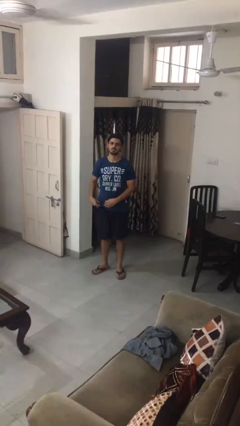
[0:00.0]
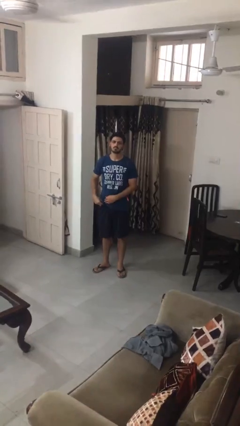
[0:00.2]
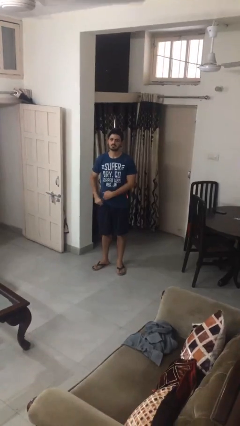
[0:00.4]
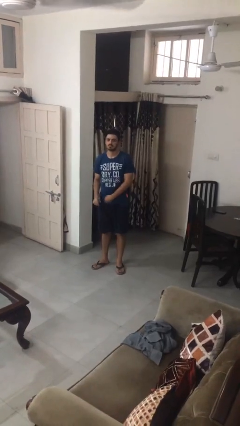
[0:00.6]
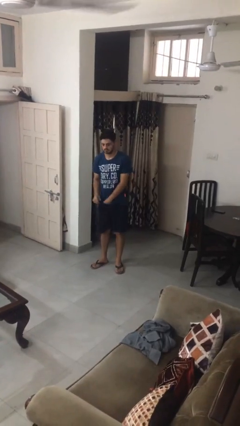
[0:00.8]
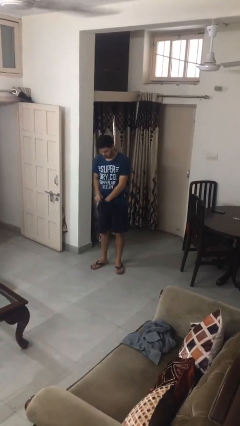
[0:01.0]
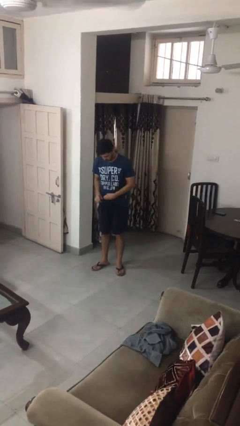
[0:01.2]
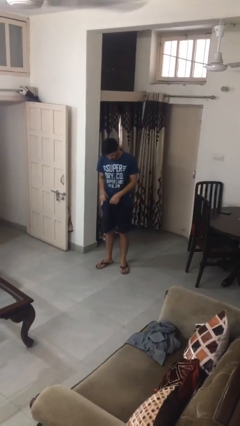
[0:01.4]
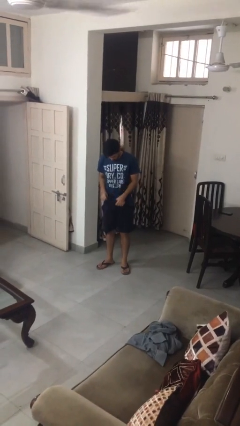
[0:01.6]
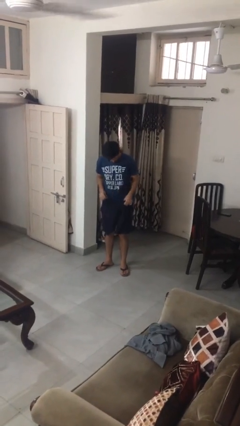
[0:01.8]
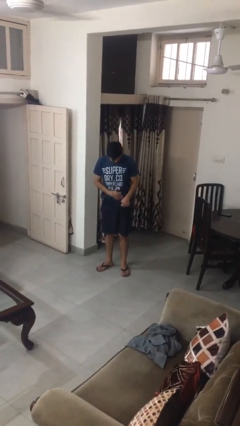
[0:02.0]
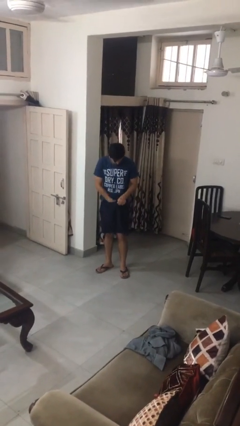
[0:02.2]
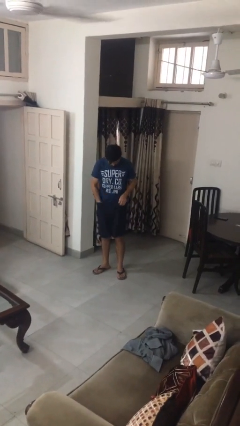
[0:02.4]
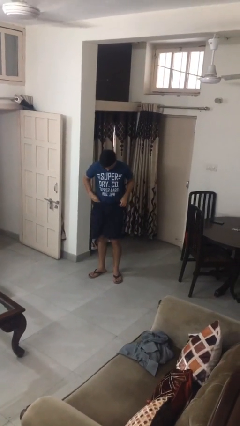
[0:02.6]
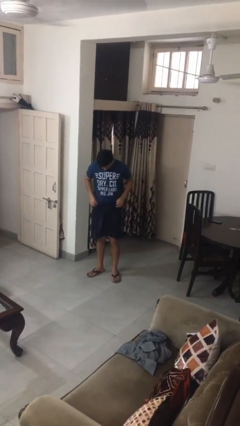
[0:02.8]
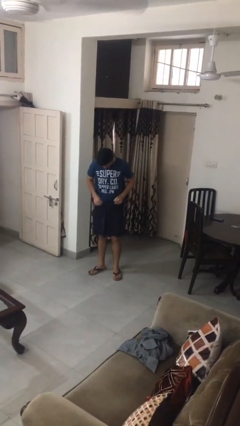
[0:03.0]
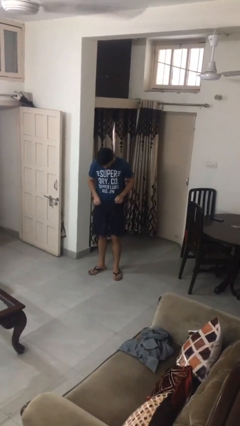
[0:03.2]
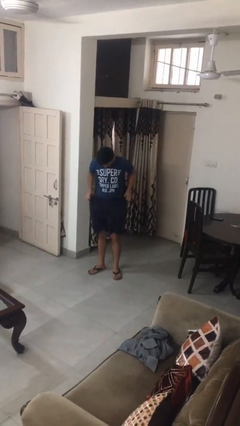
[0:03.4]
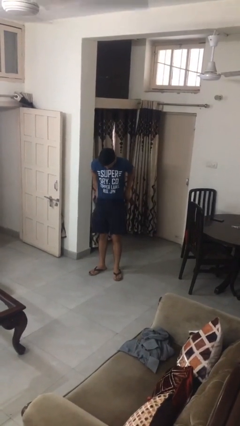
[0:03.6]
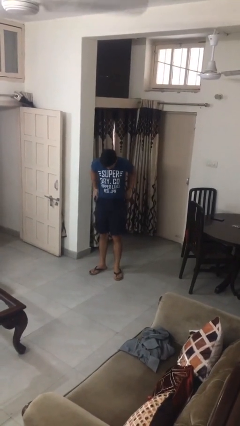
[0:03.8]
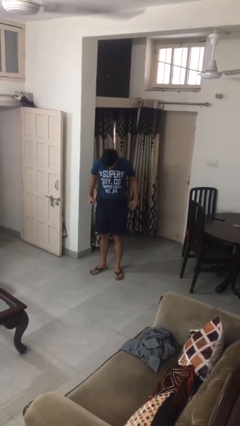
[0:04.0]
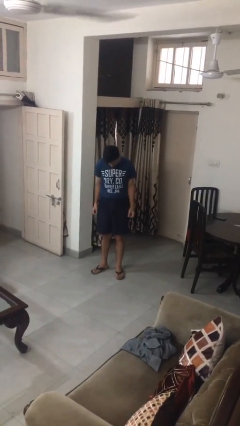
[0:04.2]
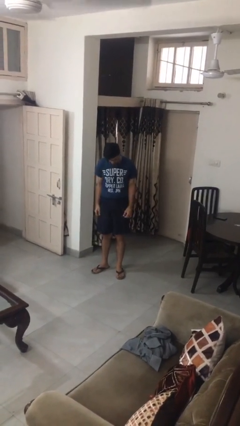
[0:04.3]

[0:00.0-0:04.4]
person tucks in shirt

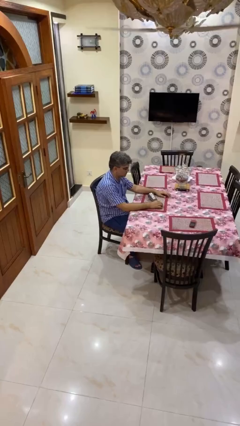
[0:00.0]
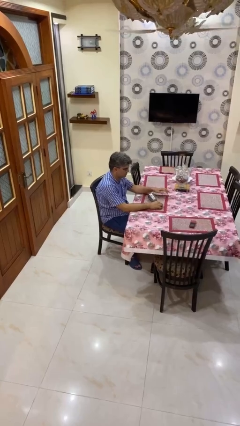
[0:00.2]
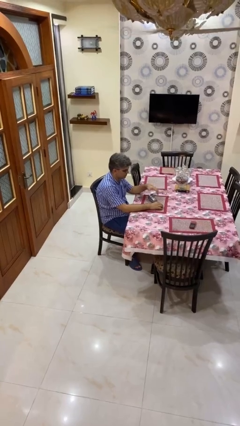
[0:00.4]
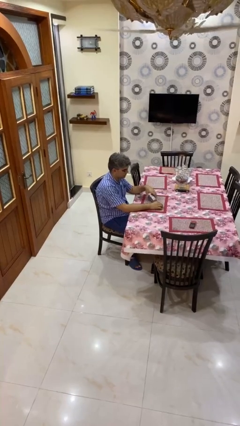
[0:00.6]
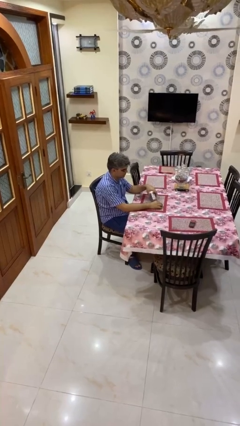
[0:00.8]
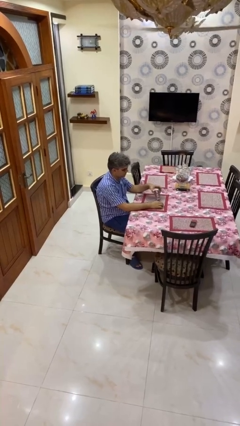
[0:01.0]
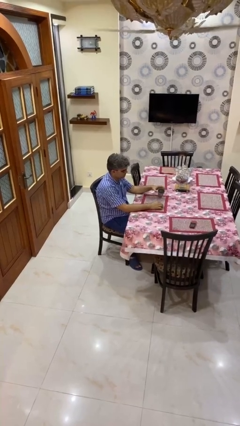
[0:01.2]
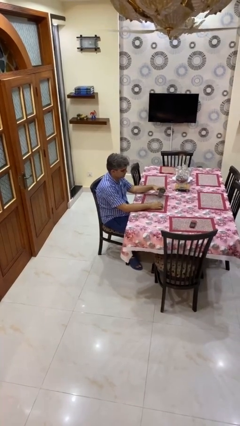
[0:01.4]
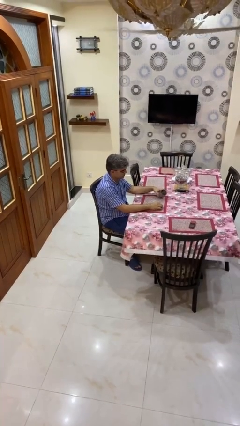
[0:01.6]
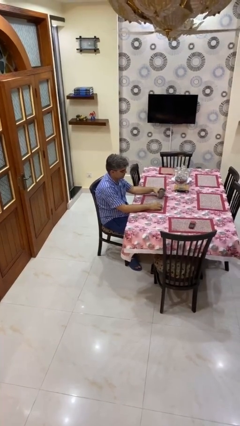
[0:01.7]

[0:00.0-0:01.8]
person sets upright glass

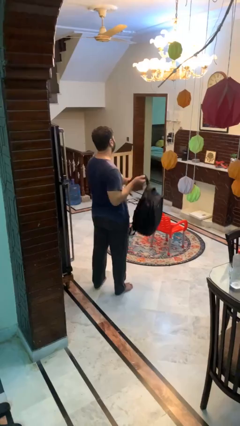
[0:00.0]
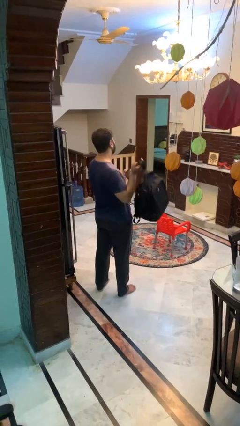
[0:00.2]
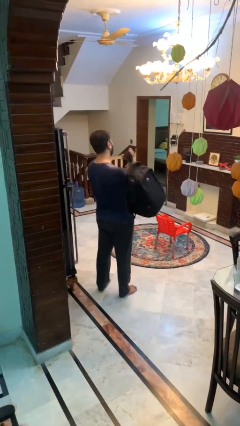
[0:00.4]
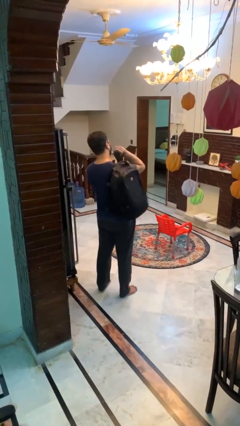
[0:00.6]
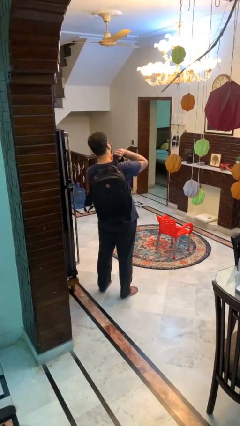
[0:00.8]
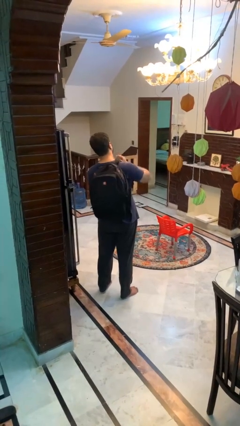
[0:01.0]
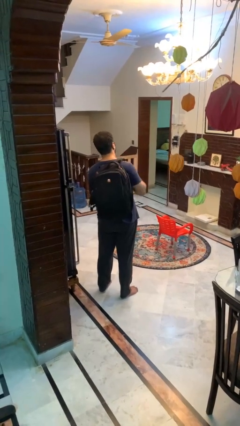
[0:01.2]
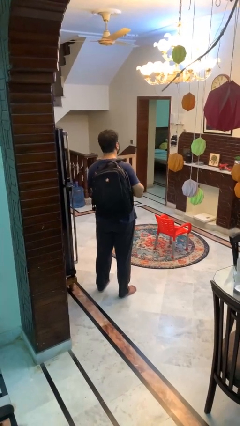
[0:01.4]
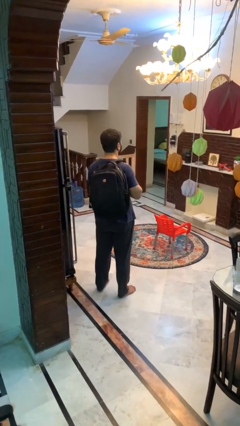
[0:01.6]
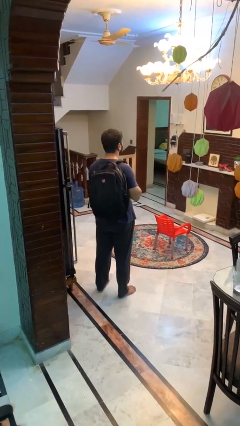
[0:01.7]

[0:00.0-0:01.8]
person puts on backpack

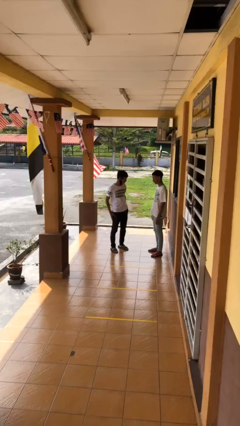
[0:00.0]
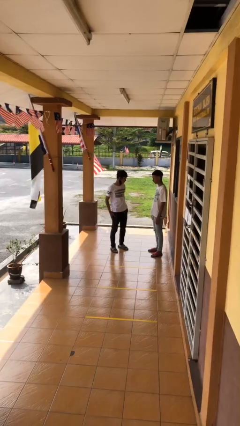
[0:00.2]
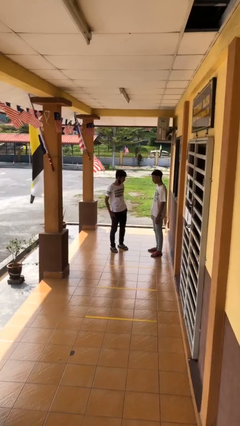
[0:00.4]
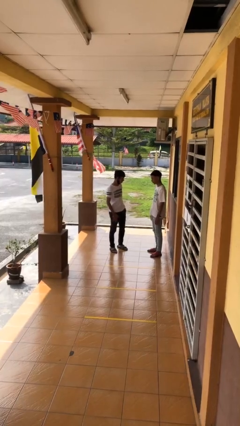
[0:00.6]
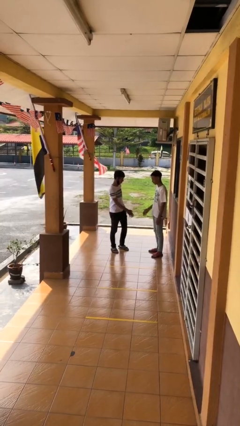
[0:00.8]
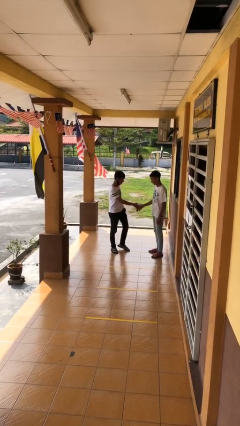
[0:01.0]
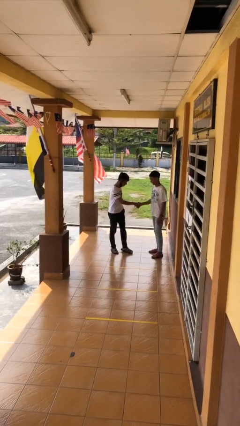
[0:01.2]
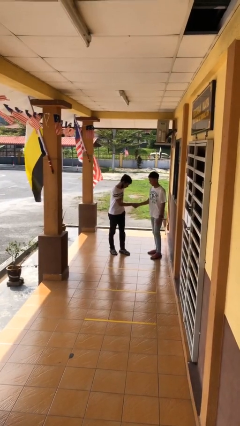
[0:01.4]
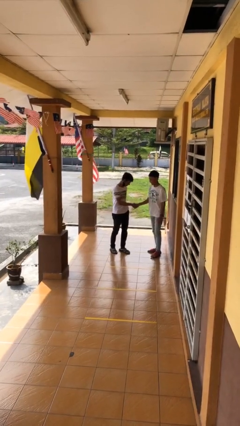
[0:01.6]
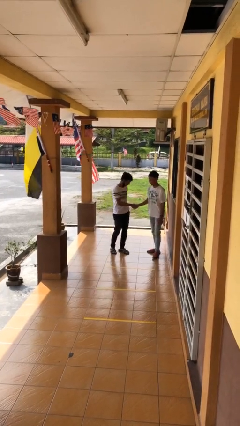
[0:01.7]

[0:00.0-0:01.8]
person shakes hand

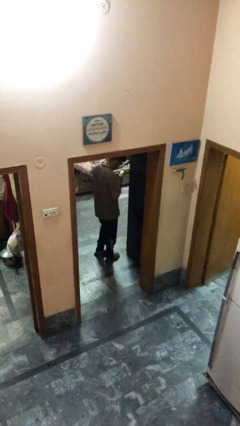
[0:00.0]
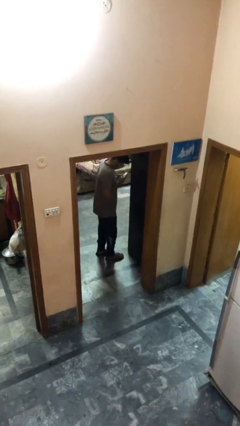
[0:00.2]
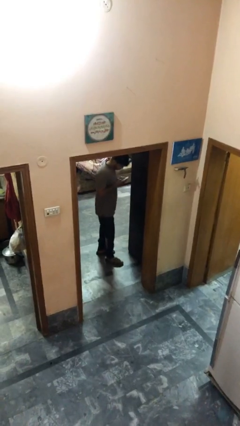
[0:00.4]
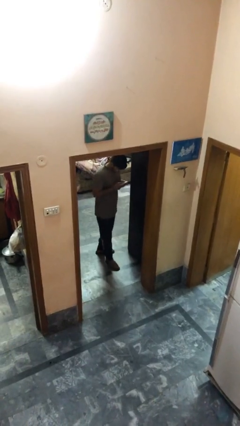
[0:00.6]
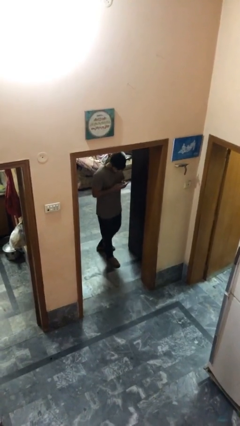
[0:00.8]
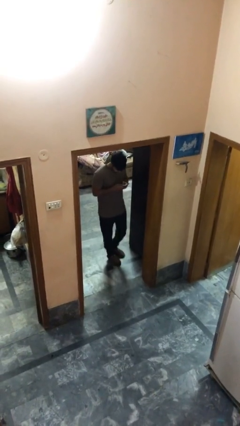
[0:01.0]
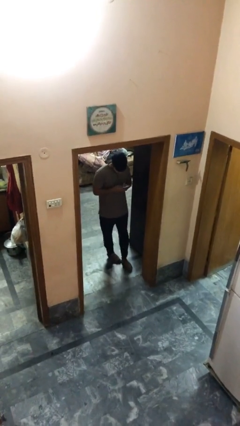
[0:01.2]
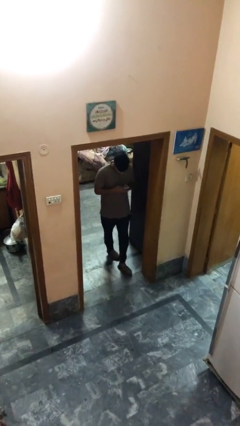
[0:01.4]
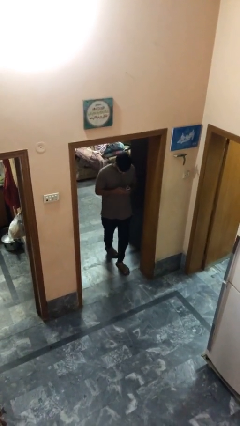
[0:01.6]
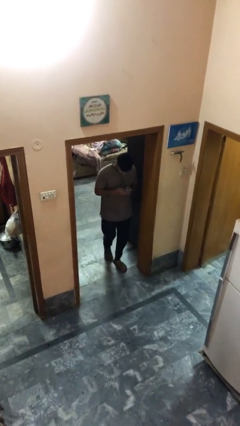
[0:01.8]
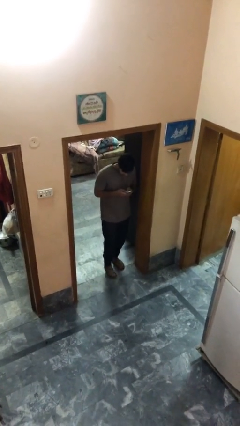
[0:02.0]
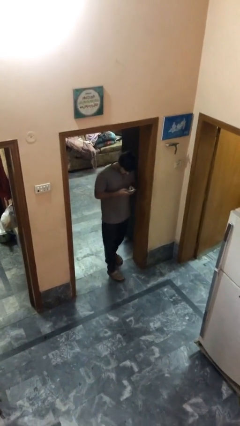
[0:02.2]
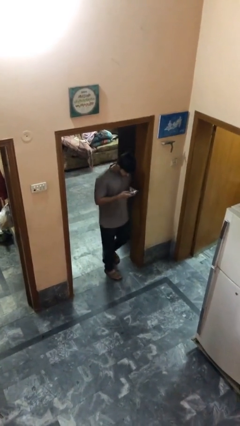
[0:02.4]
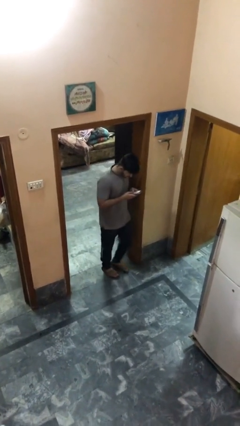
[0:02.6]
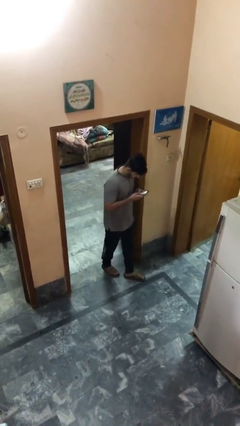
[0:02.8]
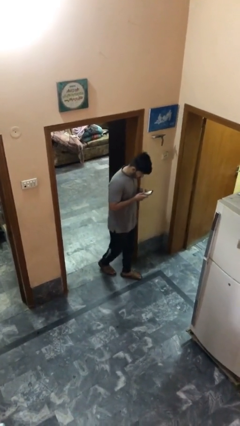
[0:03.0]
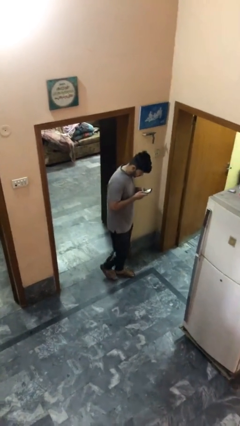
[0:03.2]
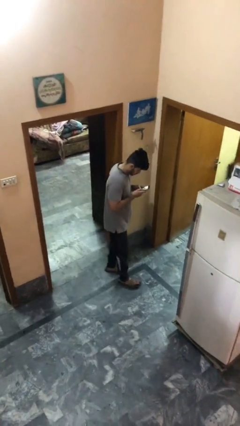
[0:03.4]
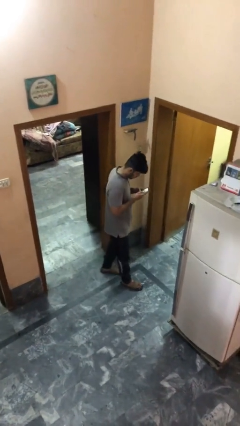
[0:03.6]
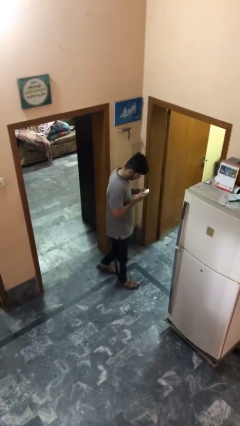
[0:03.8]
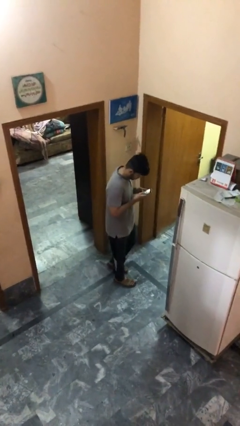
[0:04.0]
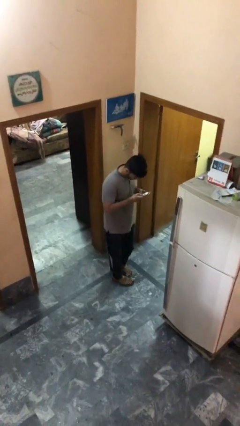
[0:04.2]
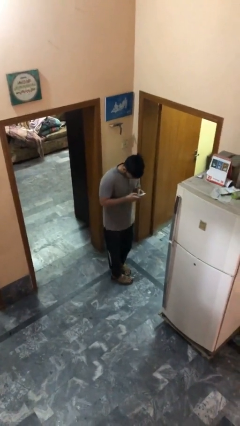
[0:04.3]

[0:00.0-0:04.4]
person enters scene through structure

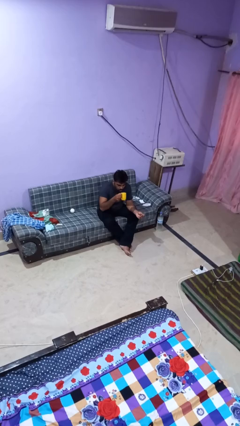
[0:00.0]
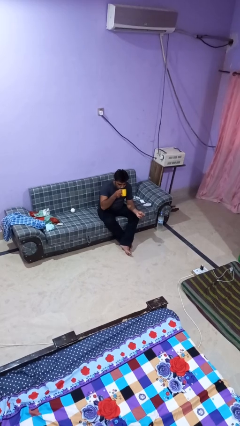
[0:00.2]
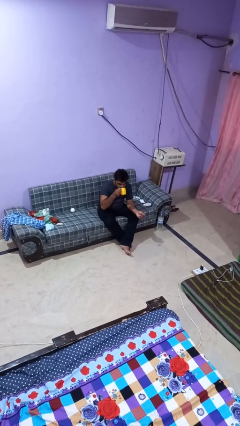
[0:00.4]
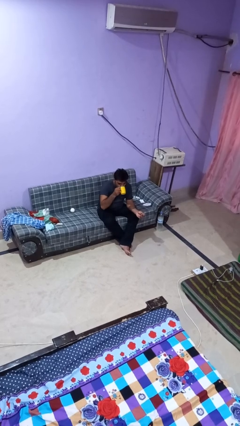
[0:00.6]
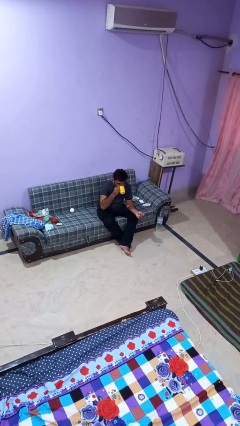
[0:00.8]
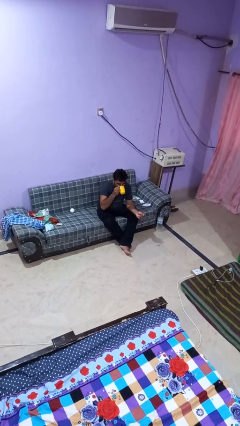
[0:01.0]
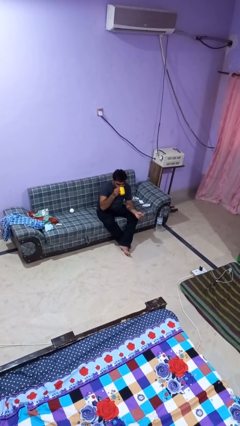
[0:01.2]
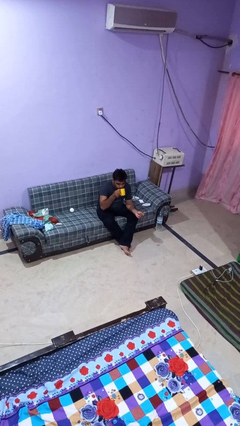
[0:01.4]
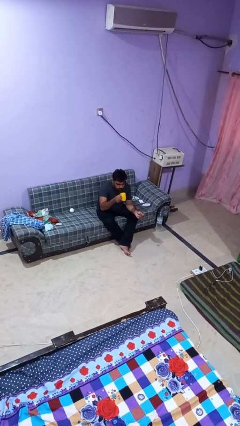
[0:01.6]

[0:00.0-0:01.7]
person drinks from mug

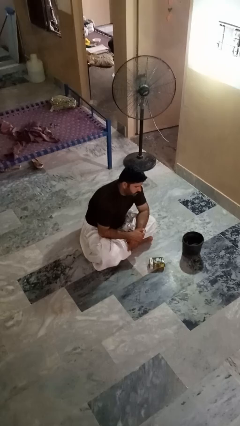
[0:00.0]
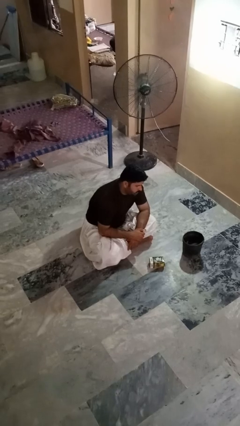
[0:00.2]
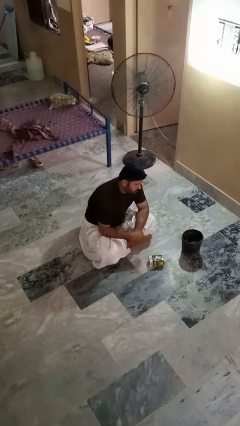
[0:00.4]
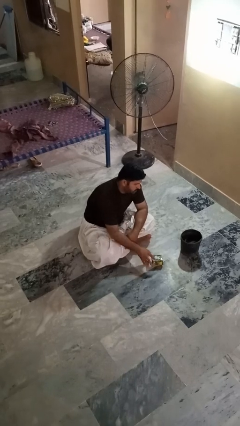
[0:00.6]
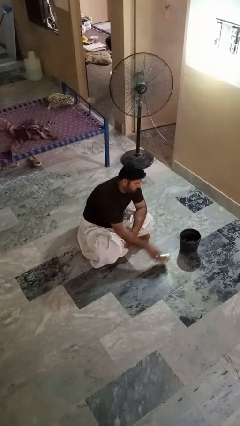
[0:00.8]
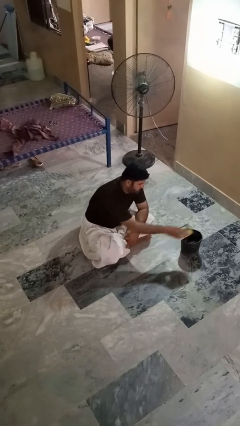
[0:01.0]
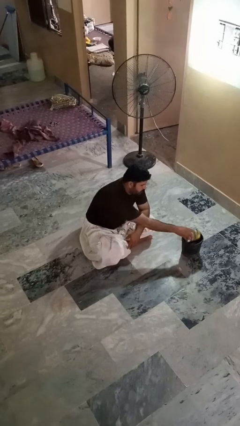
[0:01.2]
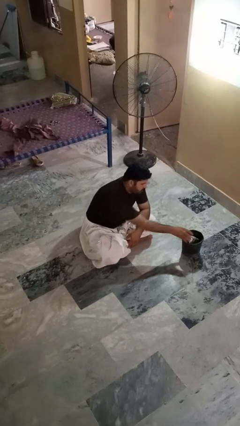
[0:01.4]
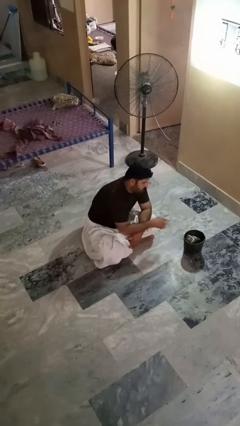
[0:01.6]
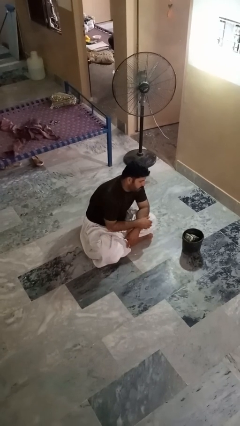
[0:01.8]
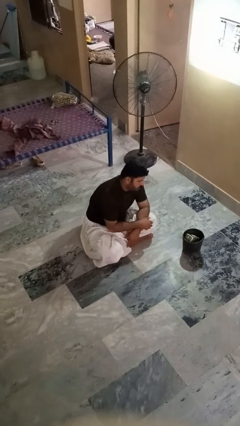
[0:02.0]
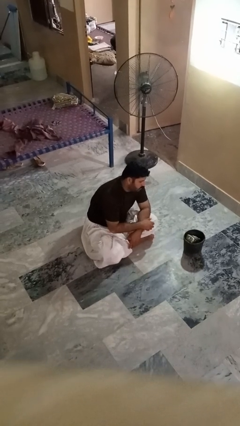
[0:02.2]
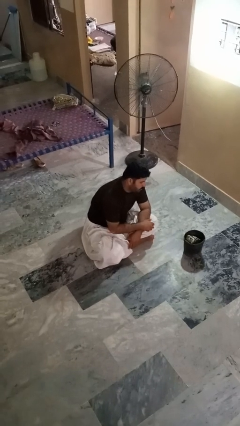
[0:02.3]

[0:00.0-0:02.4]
person puts object into basket
